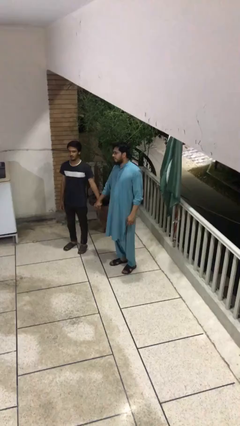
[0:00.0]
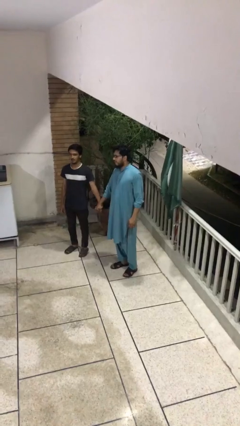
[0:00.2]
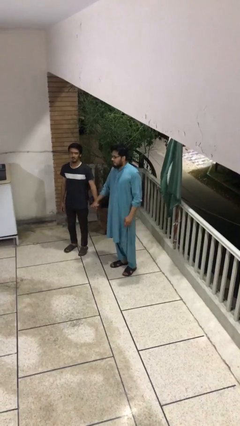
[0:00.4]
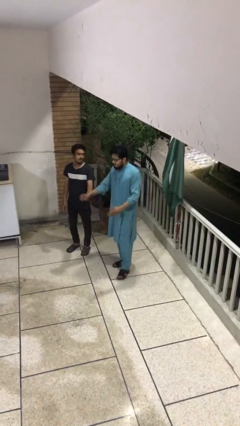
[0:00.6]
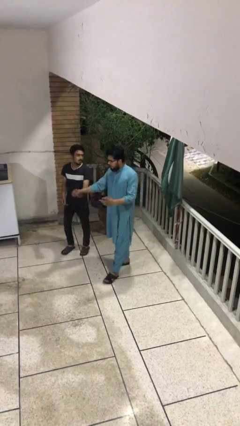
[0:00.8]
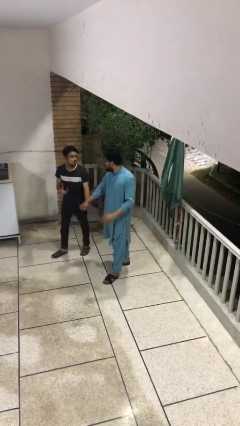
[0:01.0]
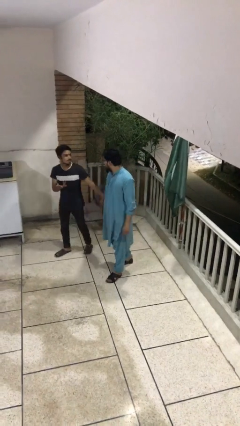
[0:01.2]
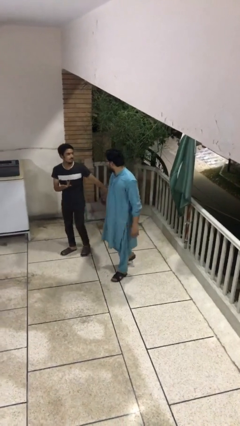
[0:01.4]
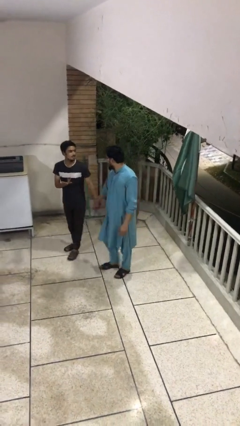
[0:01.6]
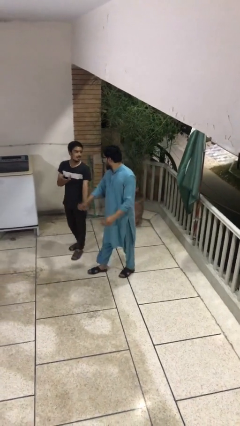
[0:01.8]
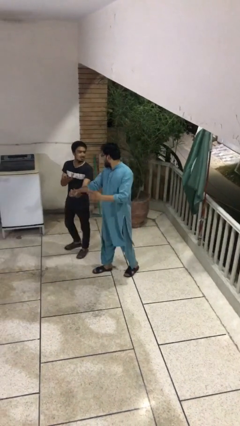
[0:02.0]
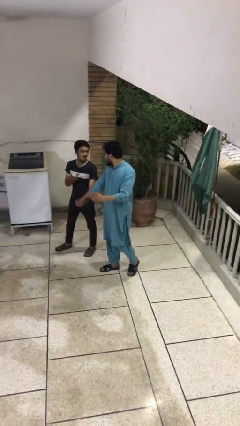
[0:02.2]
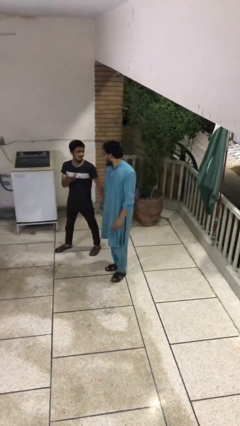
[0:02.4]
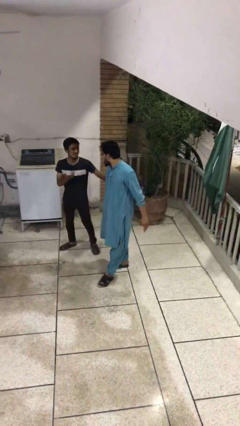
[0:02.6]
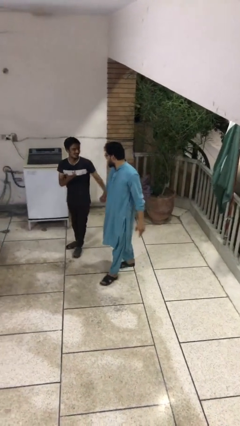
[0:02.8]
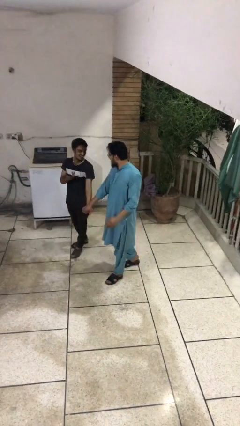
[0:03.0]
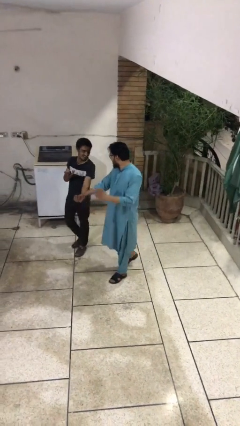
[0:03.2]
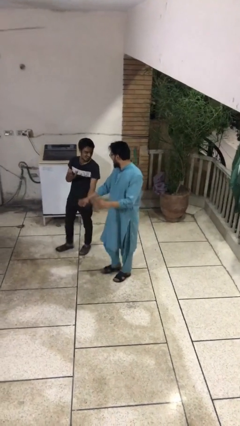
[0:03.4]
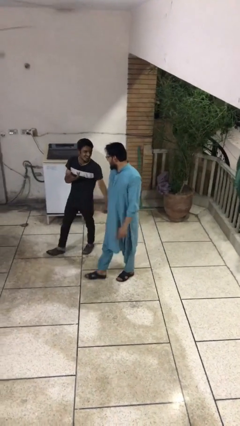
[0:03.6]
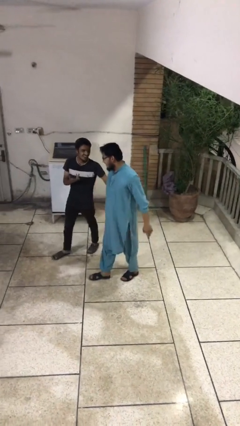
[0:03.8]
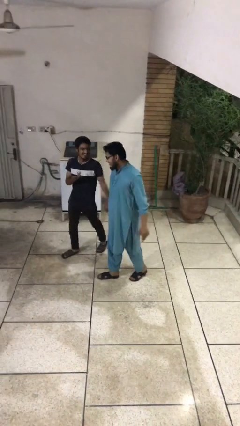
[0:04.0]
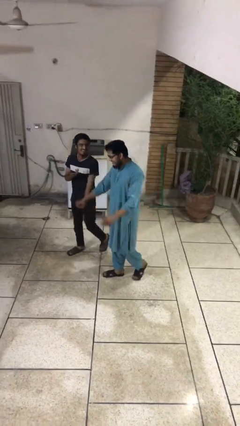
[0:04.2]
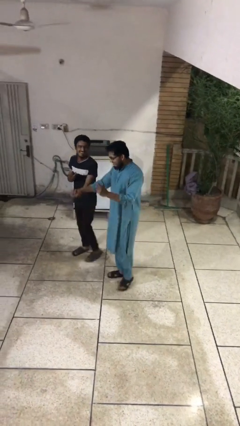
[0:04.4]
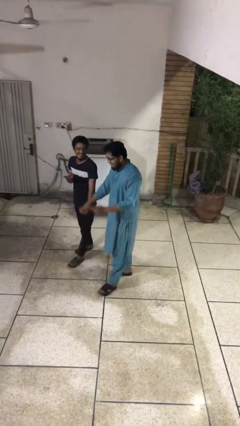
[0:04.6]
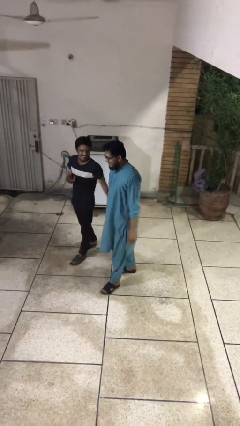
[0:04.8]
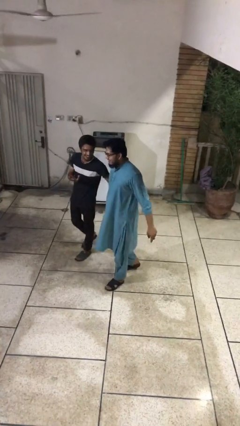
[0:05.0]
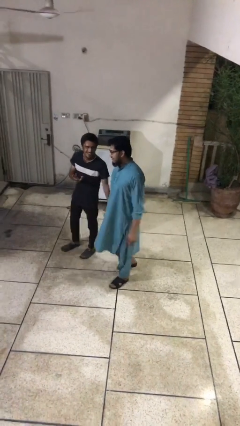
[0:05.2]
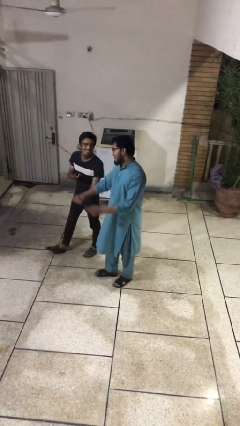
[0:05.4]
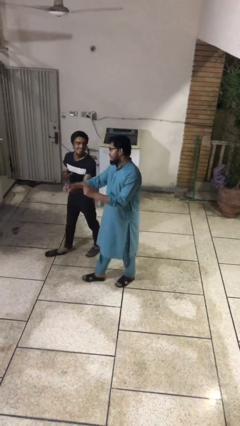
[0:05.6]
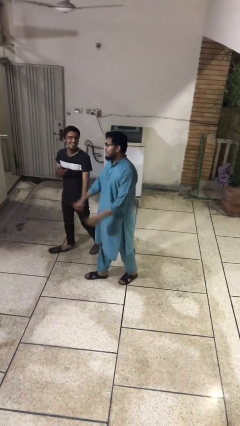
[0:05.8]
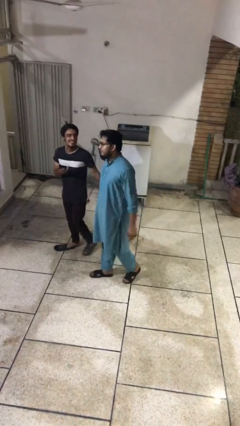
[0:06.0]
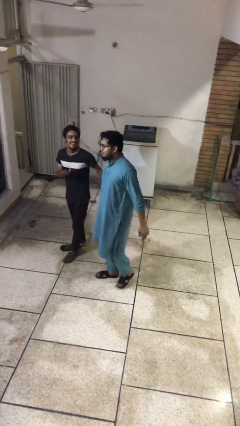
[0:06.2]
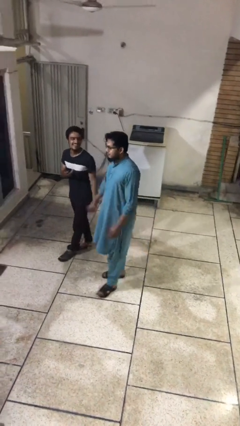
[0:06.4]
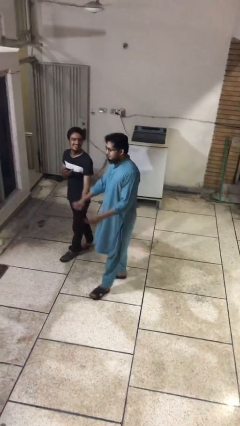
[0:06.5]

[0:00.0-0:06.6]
person holds hand

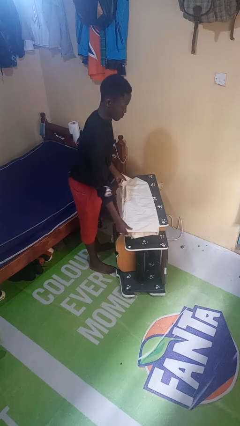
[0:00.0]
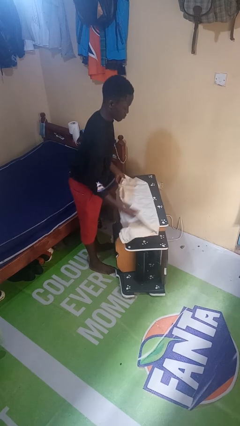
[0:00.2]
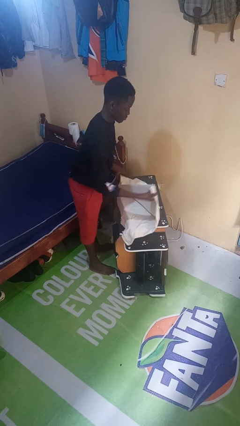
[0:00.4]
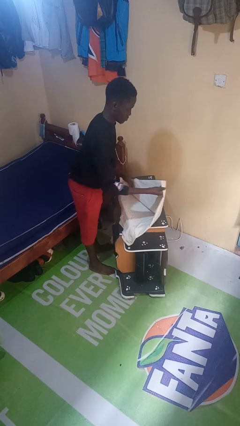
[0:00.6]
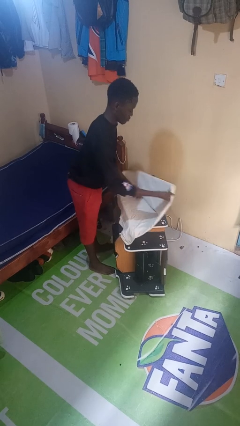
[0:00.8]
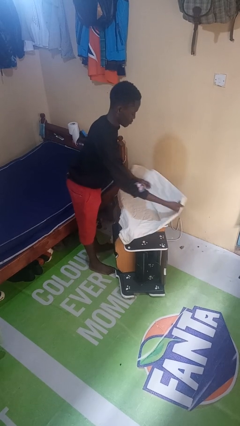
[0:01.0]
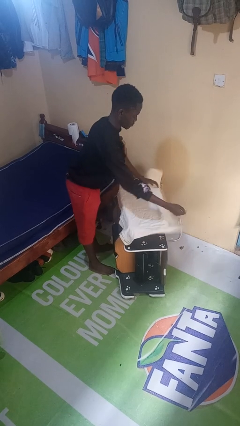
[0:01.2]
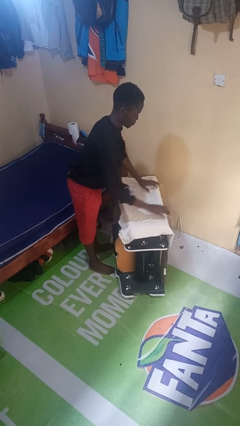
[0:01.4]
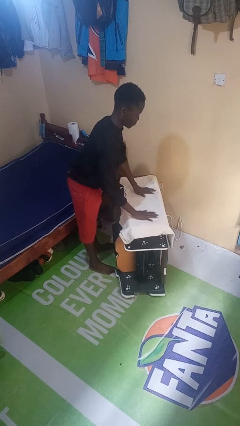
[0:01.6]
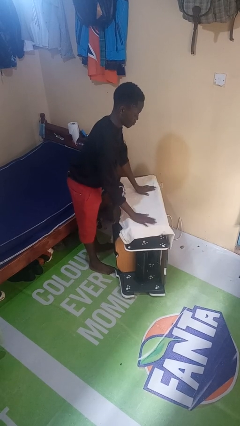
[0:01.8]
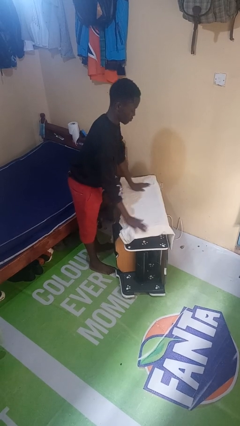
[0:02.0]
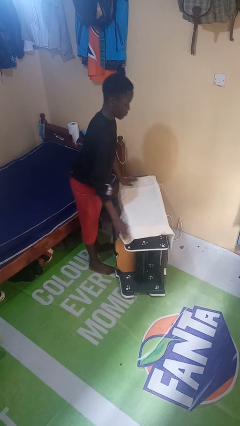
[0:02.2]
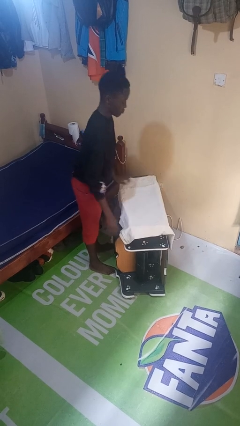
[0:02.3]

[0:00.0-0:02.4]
person spreads tablecloth

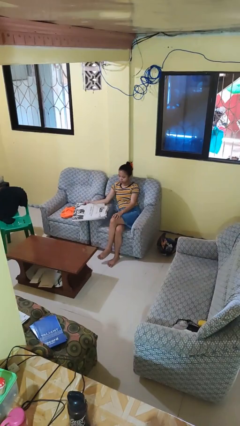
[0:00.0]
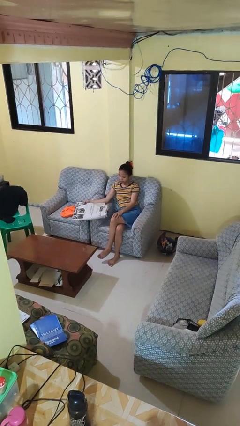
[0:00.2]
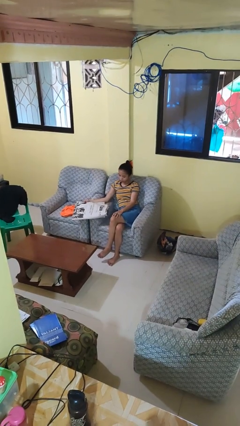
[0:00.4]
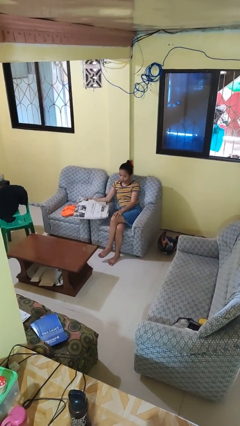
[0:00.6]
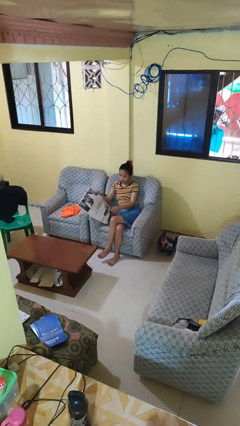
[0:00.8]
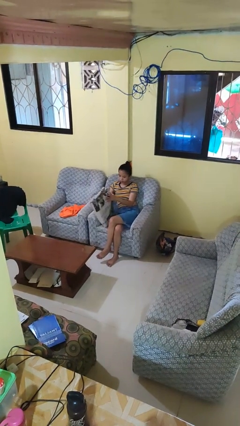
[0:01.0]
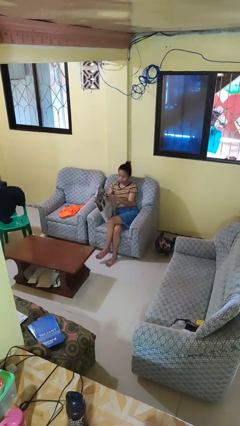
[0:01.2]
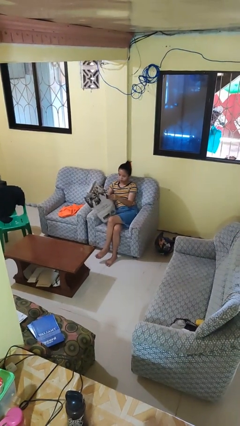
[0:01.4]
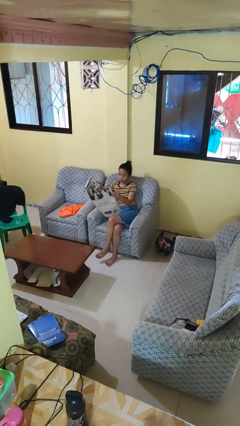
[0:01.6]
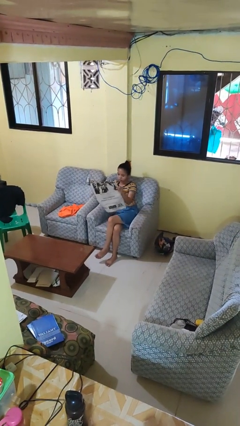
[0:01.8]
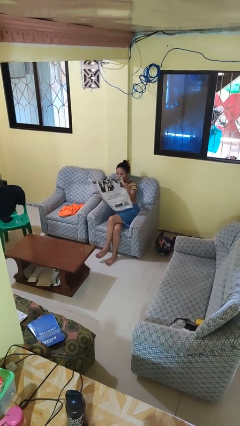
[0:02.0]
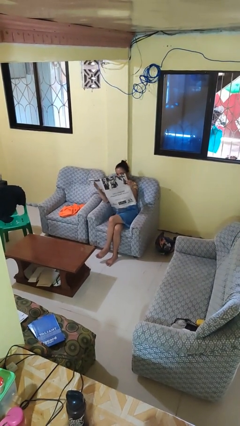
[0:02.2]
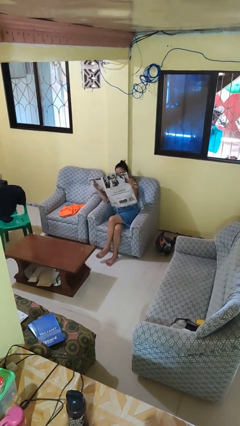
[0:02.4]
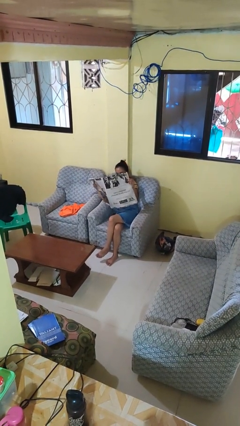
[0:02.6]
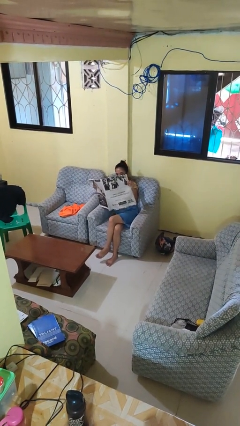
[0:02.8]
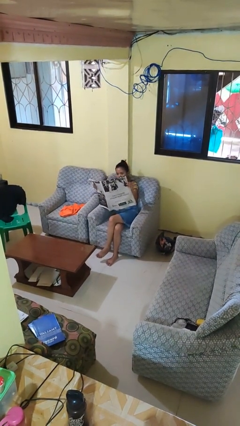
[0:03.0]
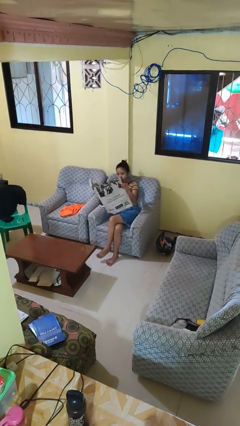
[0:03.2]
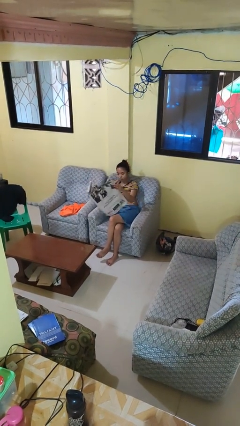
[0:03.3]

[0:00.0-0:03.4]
person reads newspaper

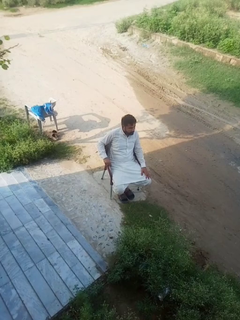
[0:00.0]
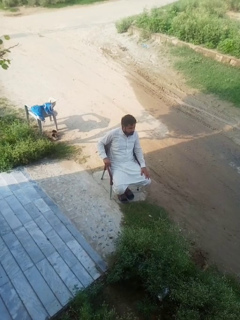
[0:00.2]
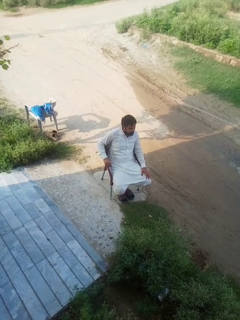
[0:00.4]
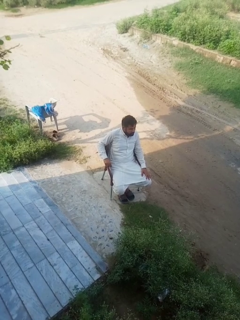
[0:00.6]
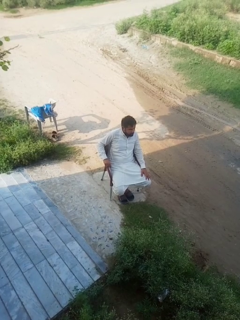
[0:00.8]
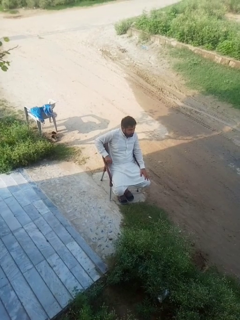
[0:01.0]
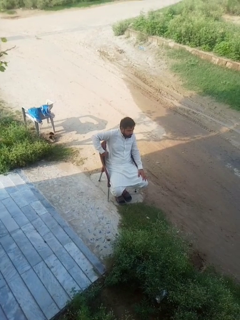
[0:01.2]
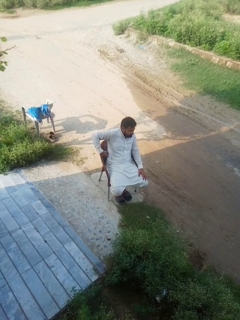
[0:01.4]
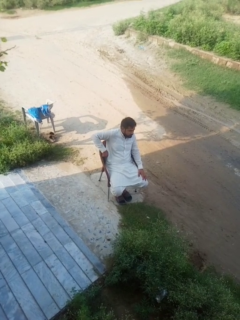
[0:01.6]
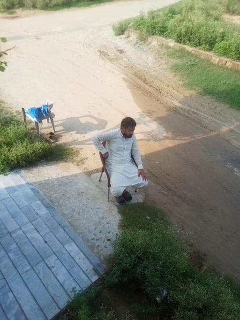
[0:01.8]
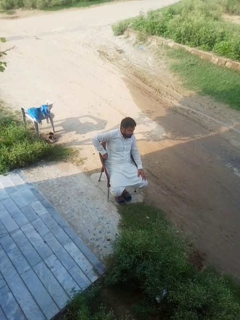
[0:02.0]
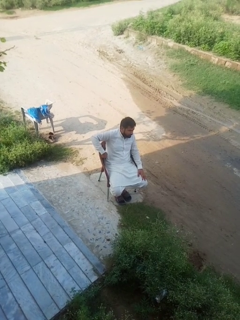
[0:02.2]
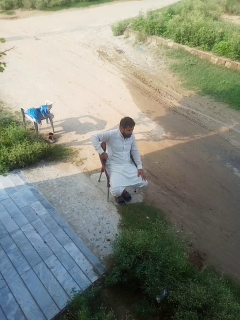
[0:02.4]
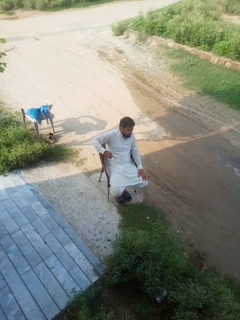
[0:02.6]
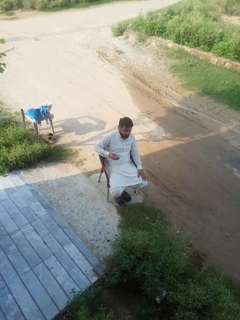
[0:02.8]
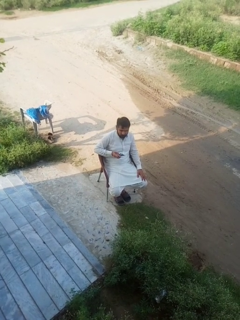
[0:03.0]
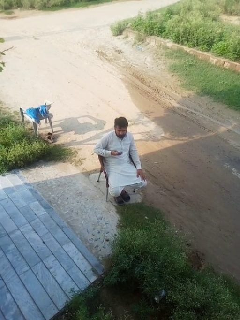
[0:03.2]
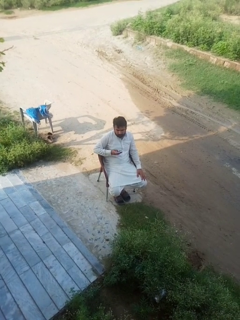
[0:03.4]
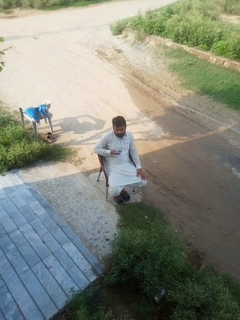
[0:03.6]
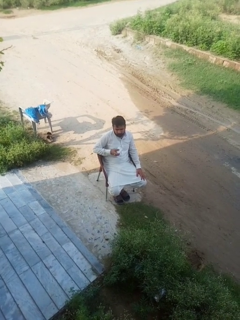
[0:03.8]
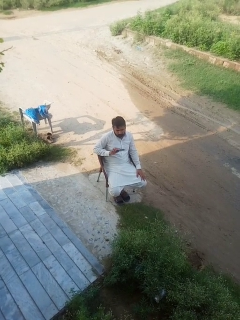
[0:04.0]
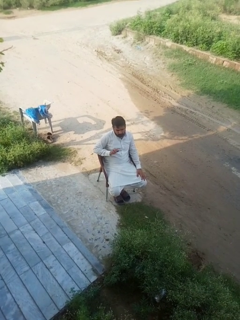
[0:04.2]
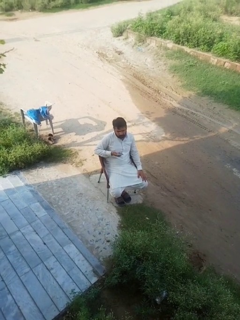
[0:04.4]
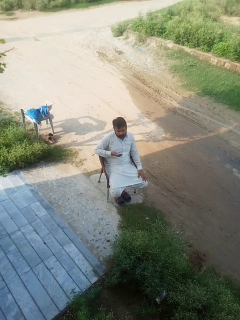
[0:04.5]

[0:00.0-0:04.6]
person takes phone from pocket

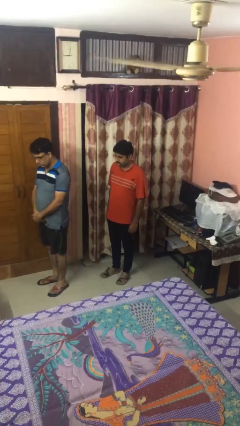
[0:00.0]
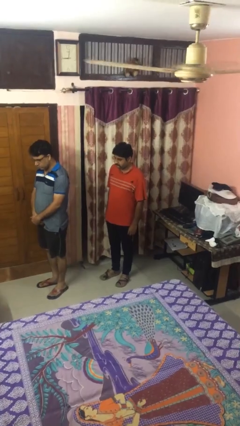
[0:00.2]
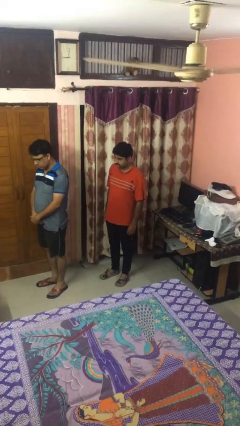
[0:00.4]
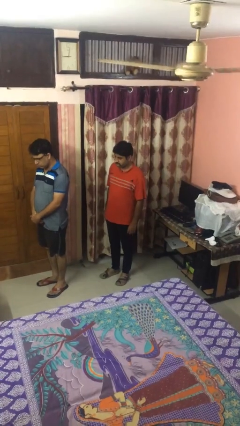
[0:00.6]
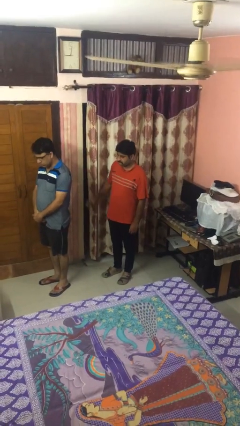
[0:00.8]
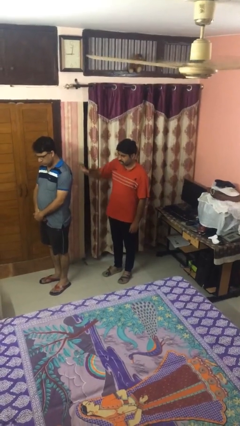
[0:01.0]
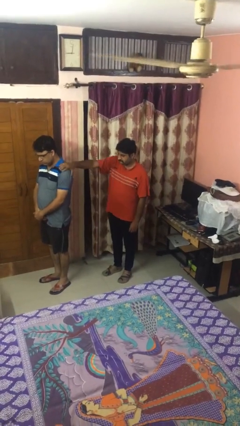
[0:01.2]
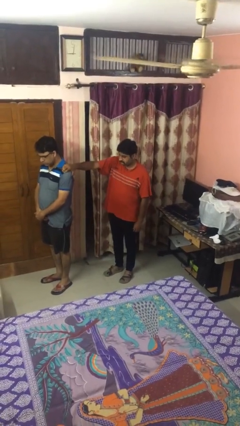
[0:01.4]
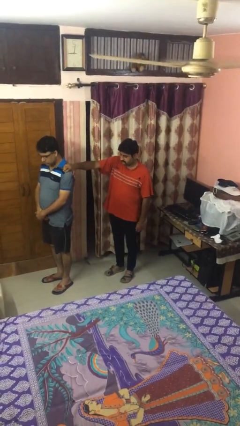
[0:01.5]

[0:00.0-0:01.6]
person grabs person by shoulder
